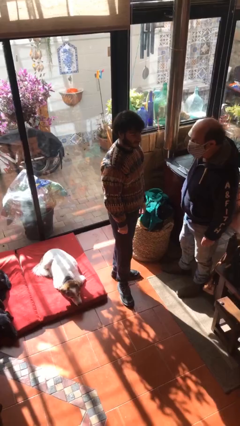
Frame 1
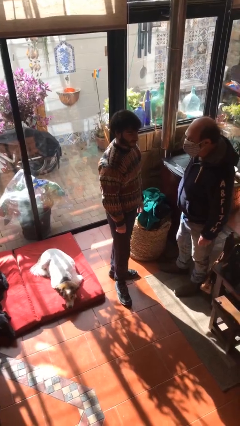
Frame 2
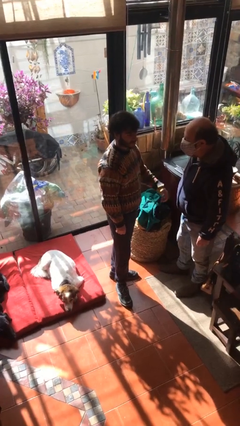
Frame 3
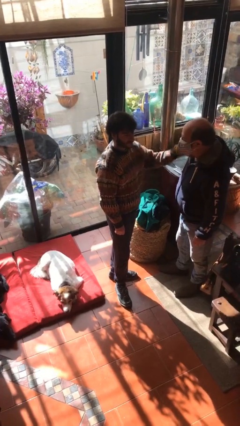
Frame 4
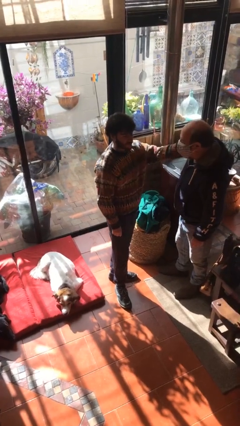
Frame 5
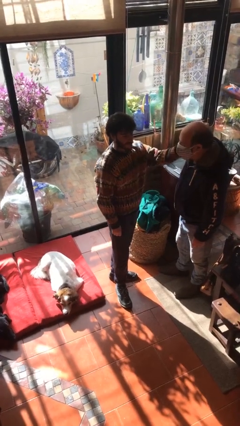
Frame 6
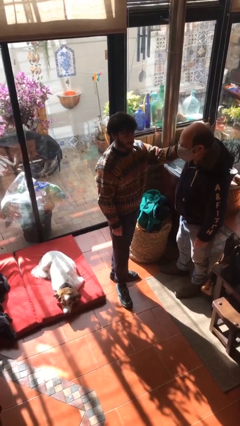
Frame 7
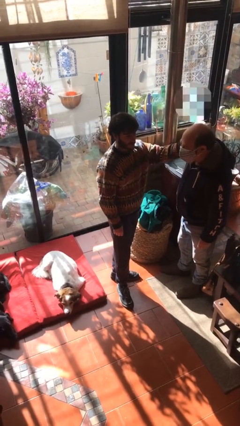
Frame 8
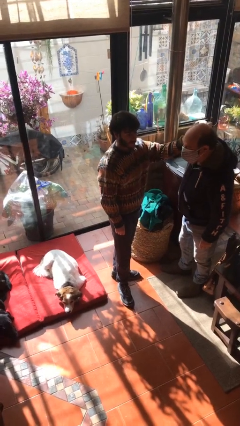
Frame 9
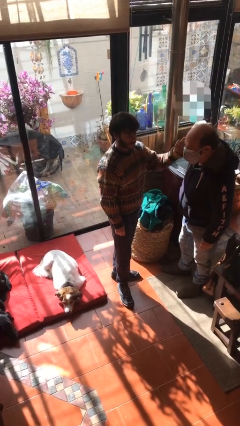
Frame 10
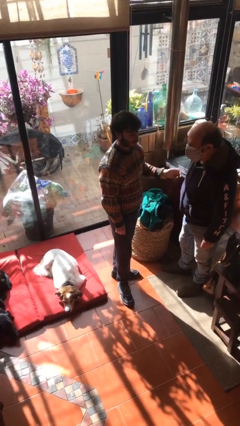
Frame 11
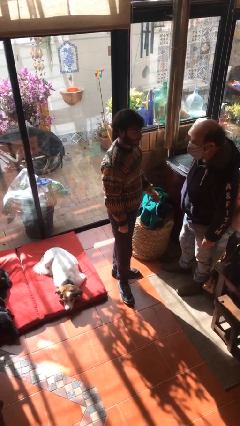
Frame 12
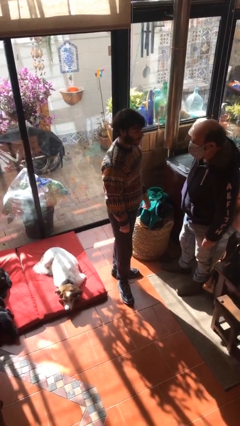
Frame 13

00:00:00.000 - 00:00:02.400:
person touches face of person

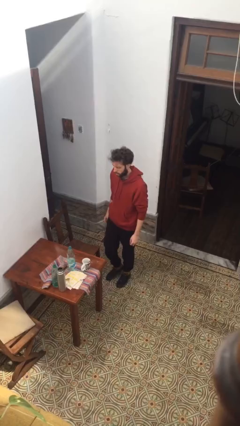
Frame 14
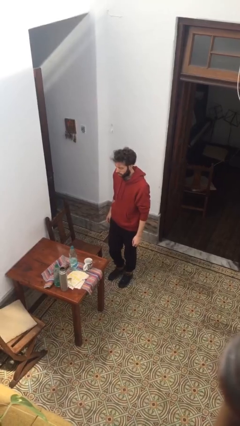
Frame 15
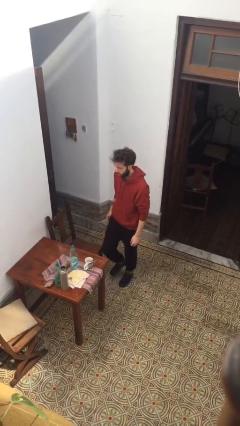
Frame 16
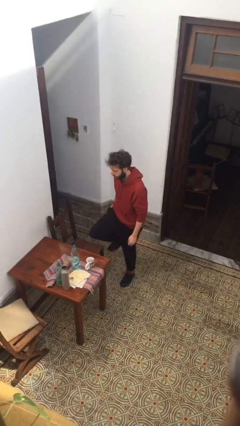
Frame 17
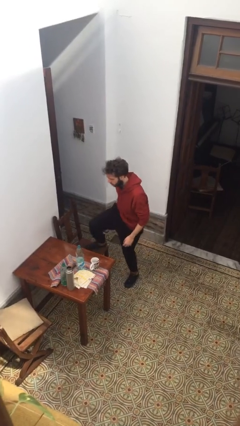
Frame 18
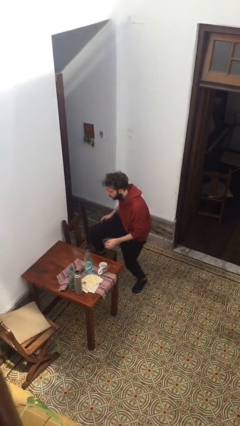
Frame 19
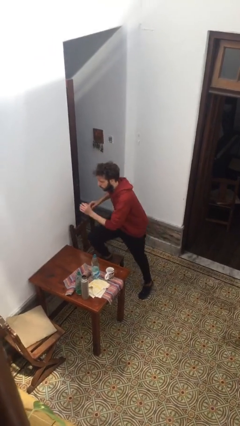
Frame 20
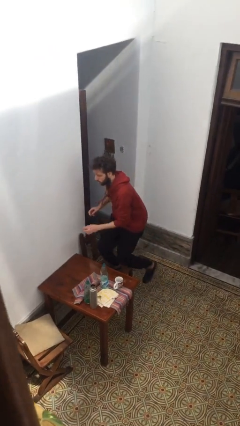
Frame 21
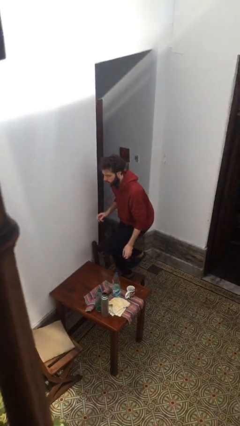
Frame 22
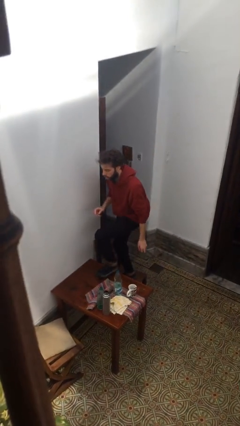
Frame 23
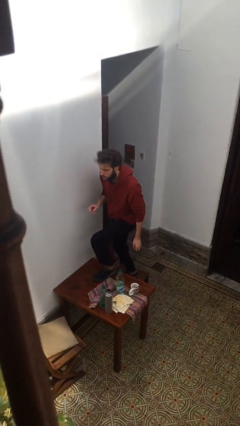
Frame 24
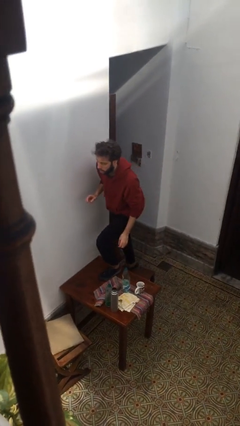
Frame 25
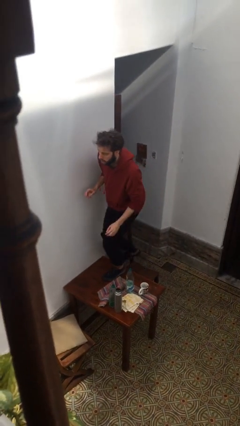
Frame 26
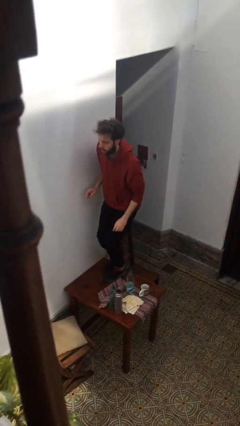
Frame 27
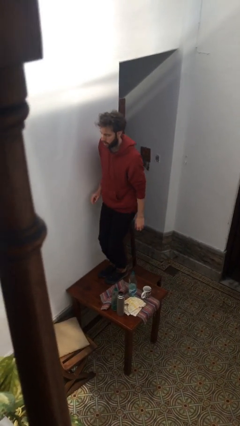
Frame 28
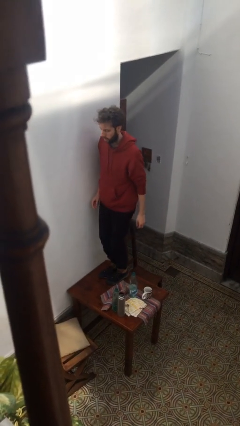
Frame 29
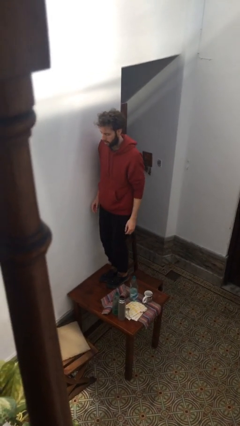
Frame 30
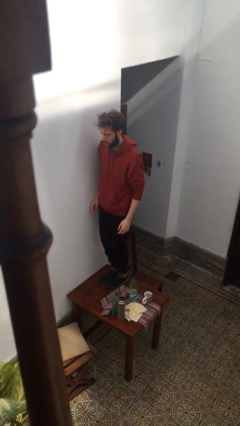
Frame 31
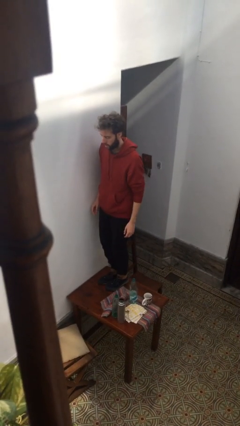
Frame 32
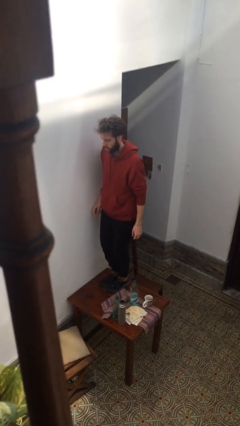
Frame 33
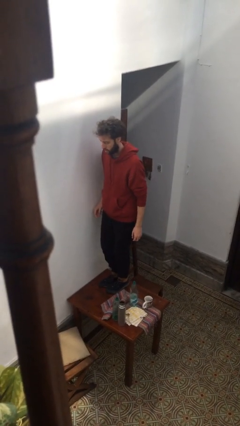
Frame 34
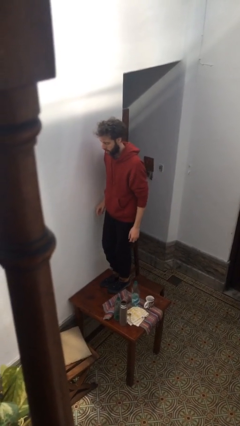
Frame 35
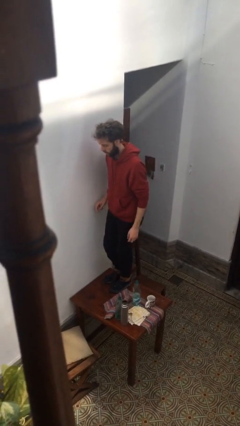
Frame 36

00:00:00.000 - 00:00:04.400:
person climbs on table

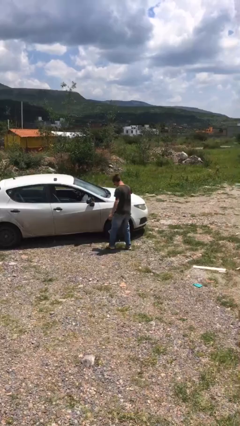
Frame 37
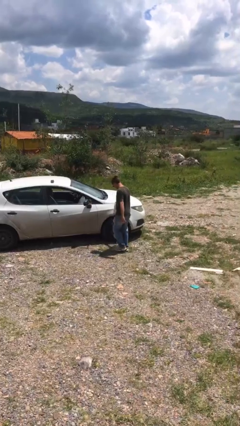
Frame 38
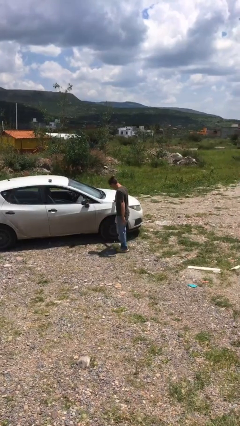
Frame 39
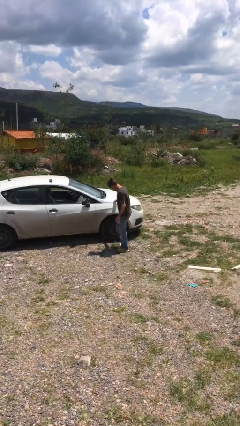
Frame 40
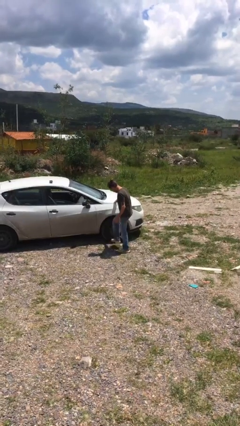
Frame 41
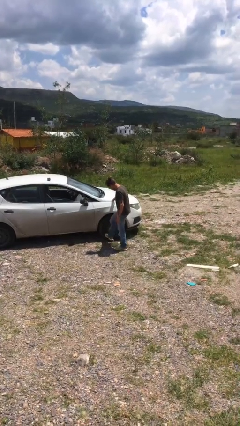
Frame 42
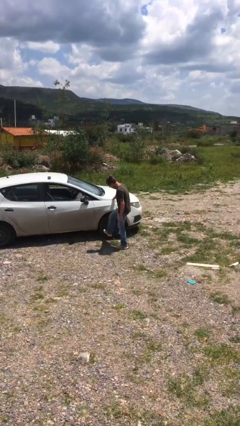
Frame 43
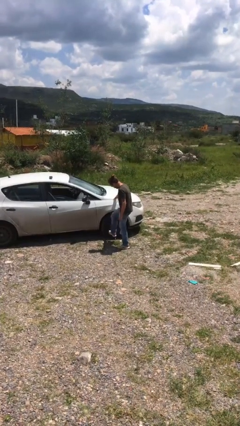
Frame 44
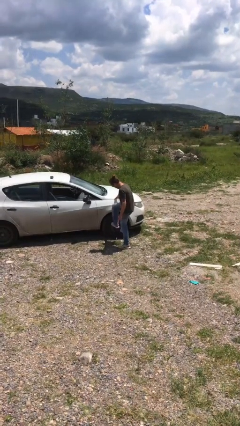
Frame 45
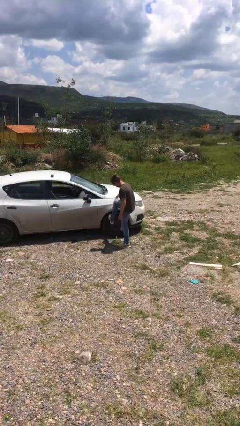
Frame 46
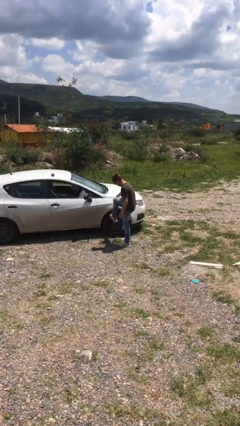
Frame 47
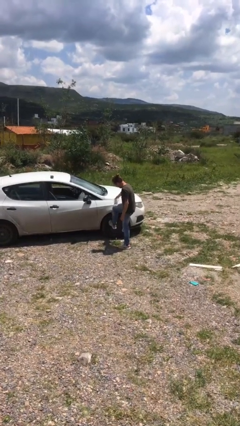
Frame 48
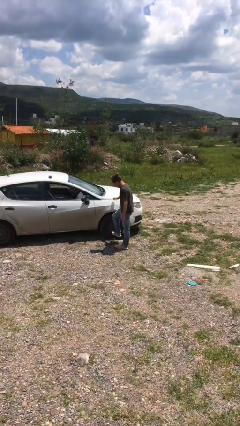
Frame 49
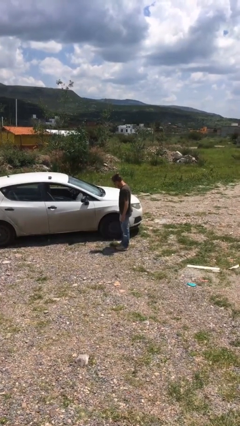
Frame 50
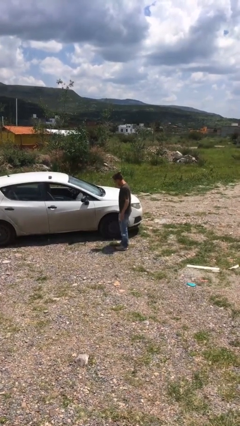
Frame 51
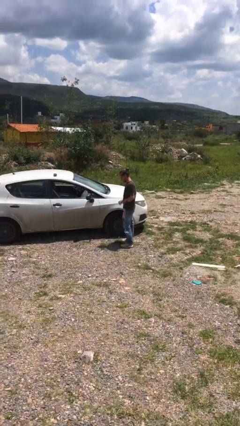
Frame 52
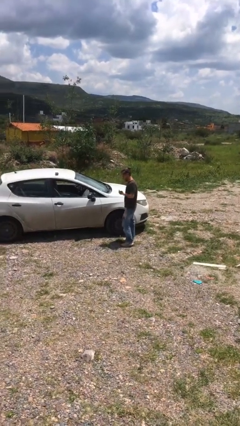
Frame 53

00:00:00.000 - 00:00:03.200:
person kicks car tires

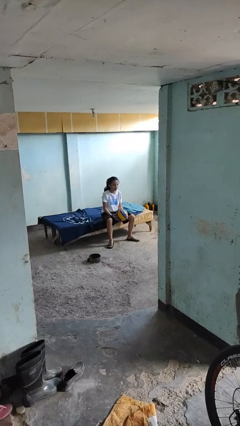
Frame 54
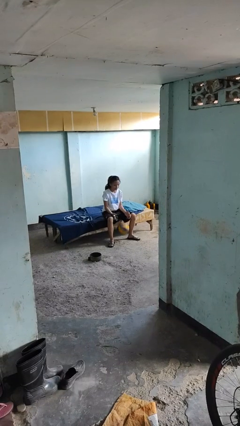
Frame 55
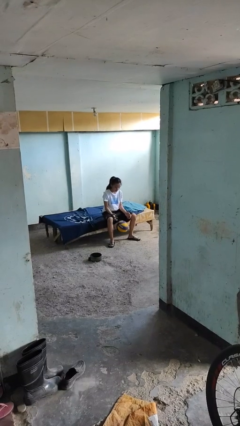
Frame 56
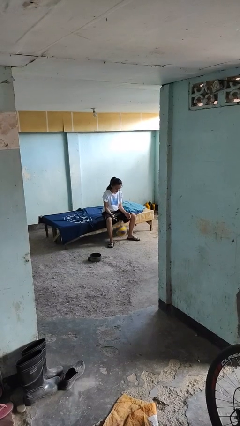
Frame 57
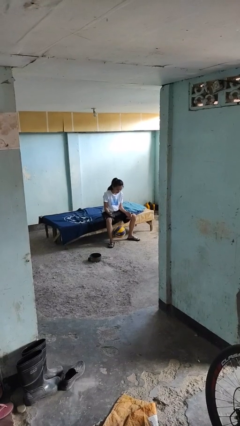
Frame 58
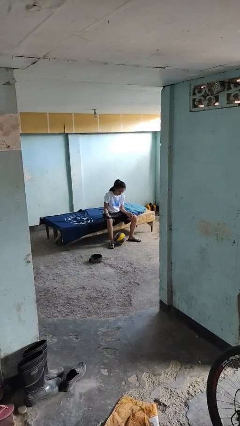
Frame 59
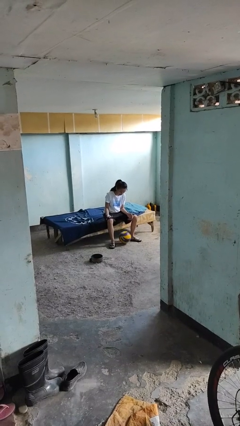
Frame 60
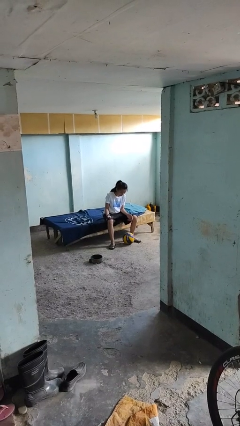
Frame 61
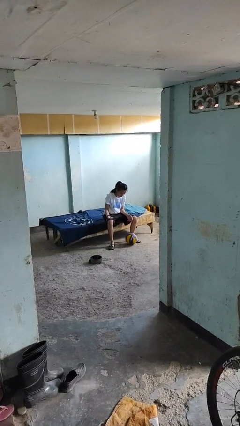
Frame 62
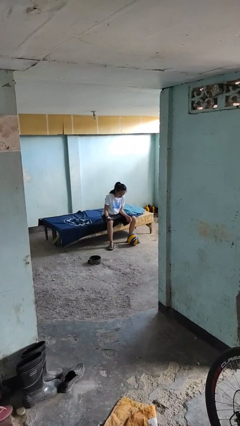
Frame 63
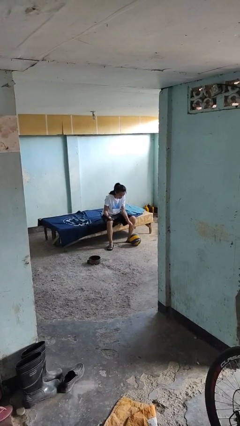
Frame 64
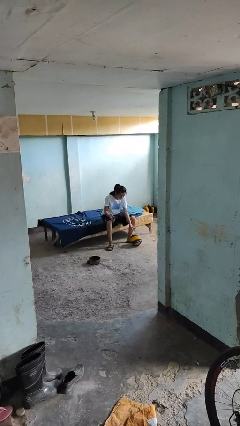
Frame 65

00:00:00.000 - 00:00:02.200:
person drops object

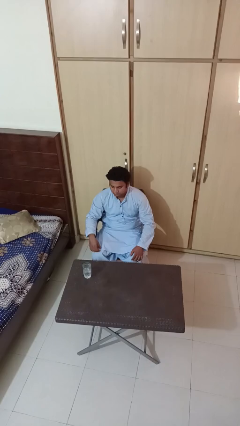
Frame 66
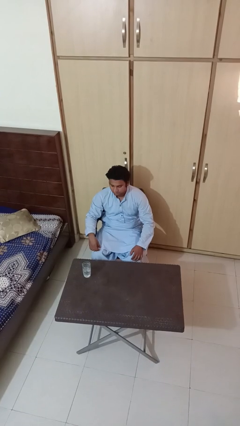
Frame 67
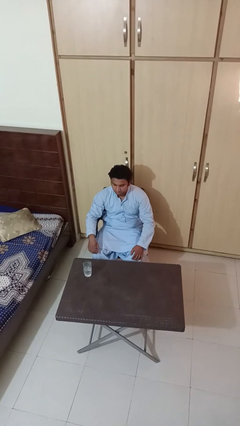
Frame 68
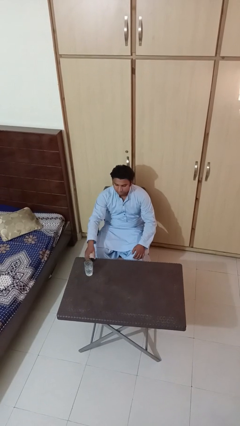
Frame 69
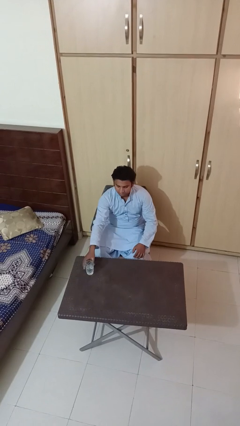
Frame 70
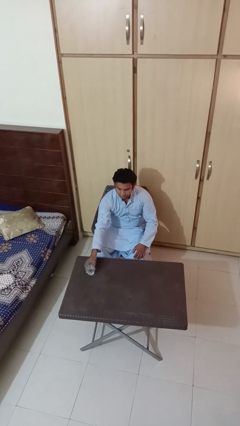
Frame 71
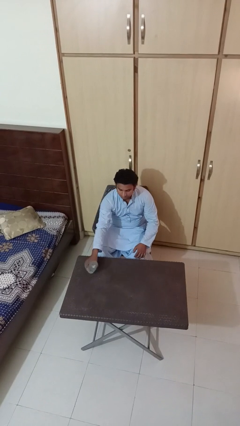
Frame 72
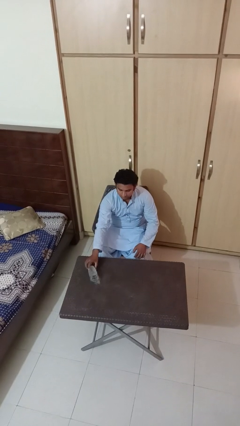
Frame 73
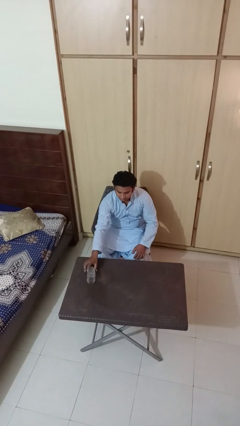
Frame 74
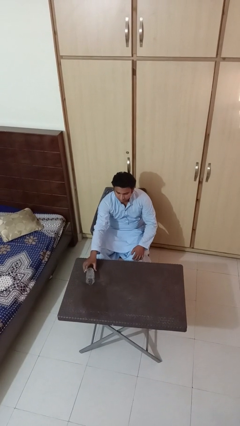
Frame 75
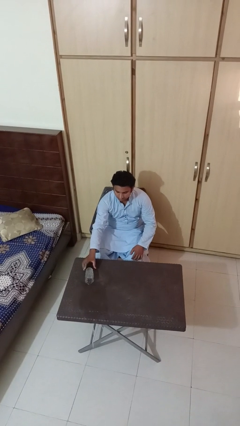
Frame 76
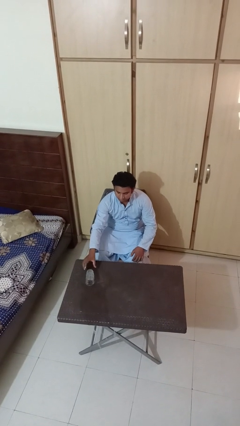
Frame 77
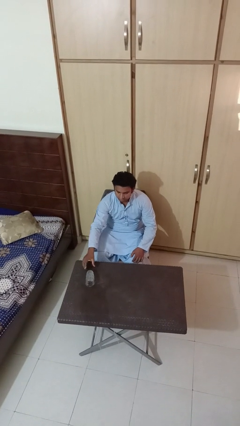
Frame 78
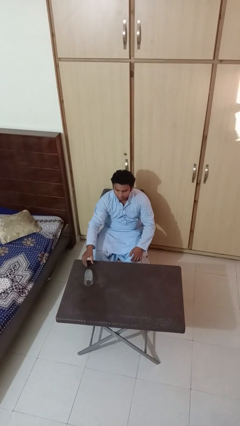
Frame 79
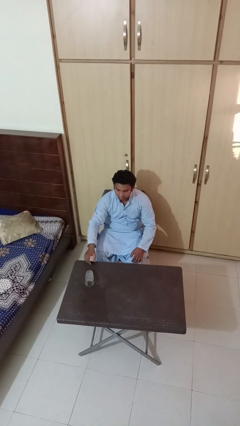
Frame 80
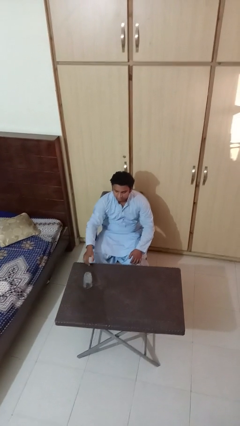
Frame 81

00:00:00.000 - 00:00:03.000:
person spills on table

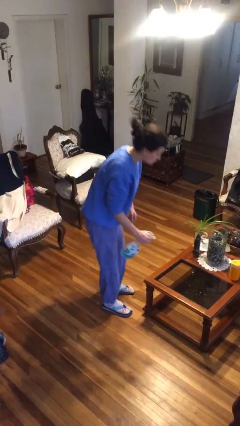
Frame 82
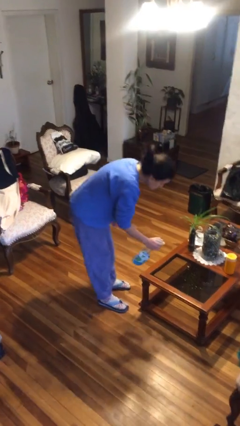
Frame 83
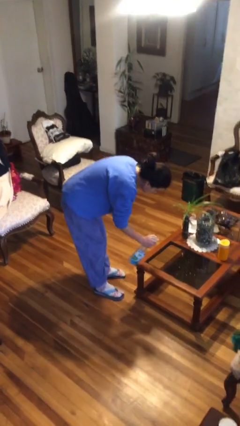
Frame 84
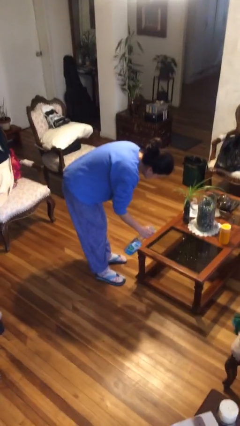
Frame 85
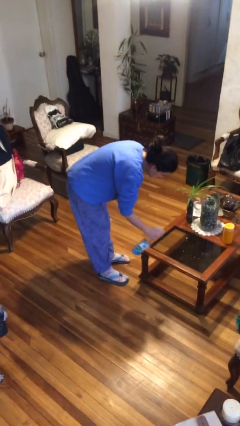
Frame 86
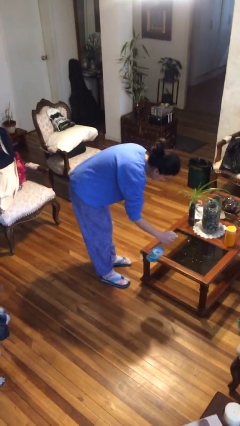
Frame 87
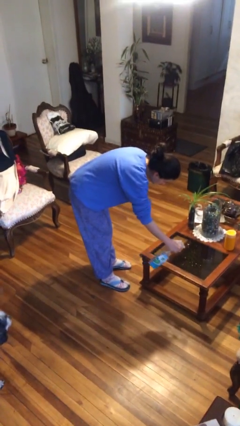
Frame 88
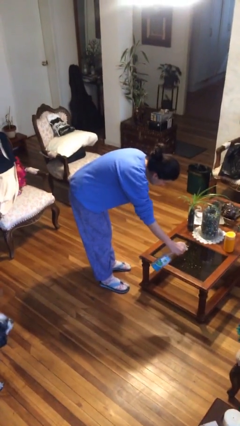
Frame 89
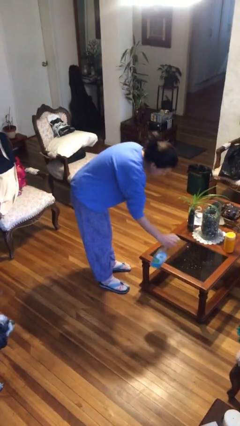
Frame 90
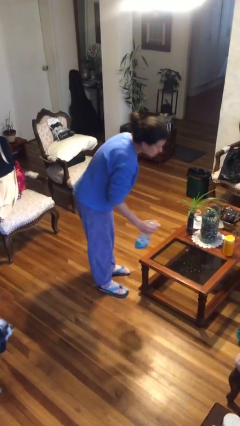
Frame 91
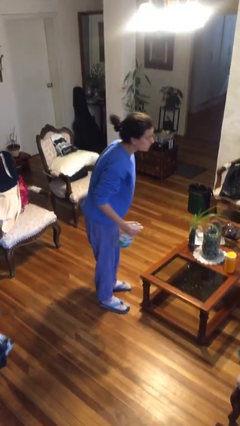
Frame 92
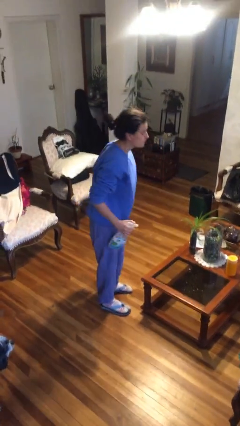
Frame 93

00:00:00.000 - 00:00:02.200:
person sprays from bottle

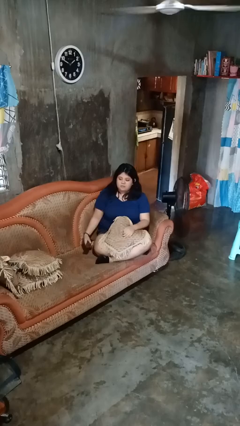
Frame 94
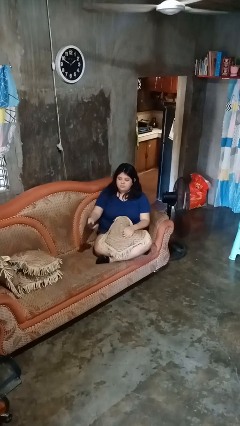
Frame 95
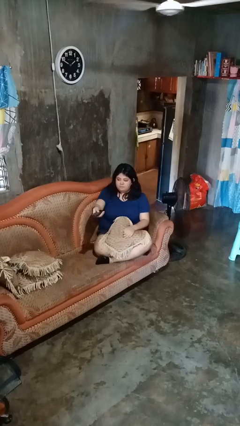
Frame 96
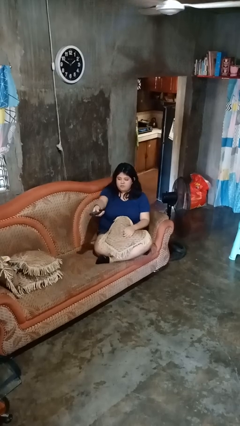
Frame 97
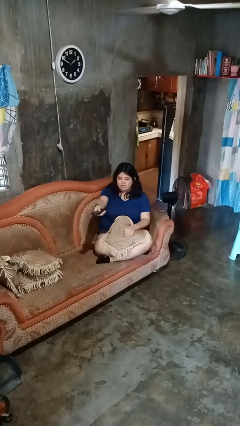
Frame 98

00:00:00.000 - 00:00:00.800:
person uses television remote
